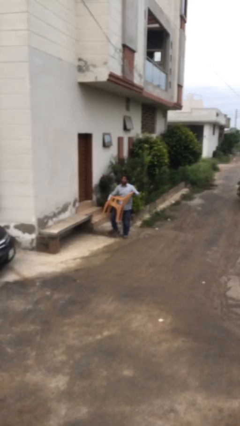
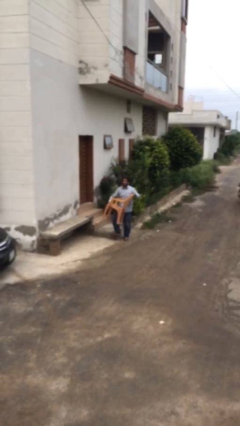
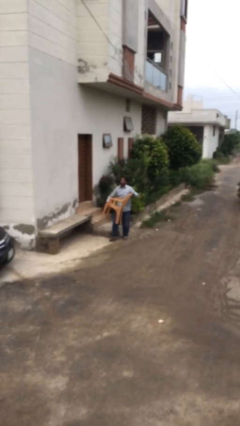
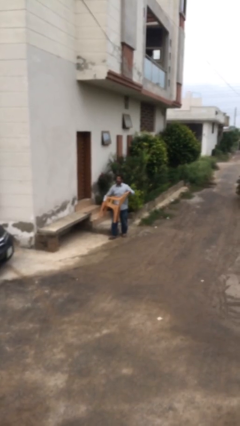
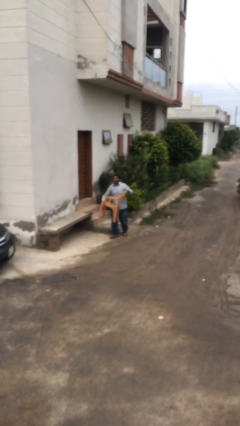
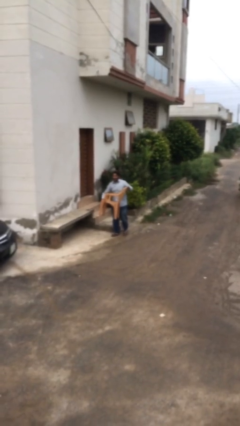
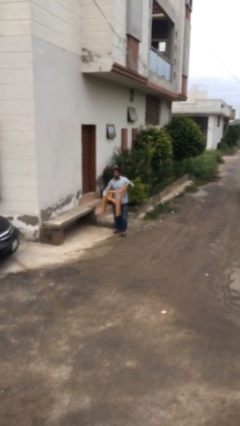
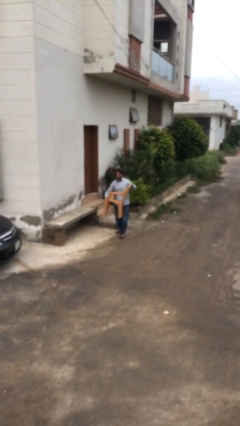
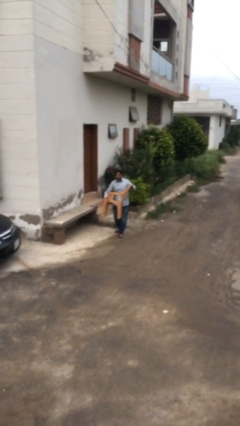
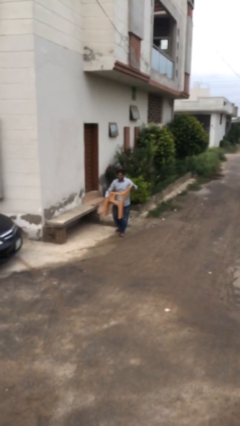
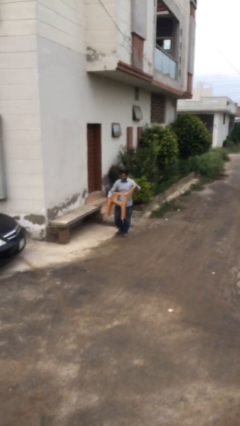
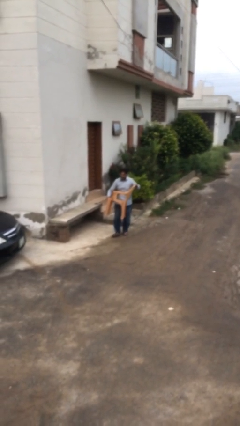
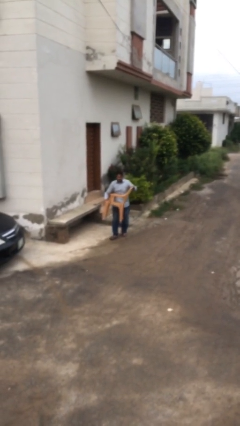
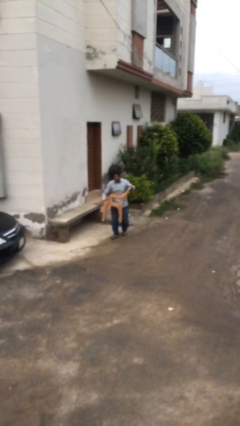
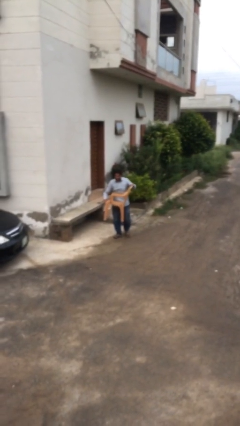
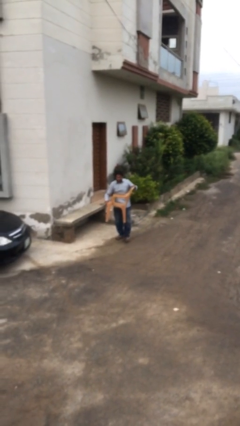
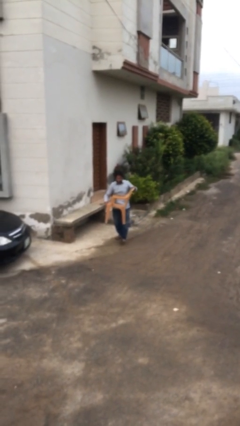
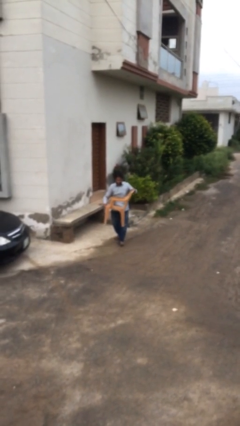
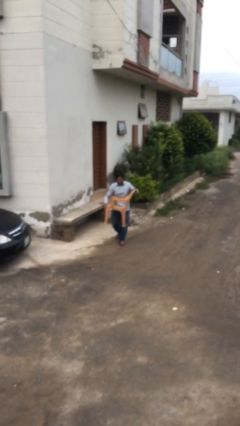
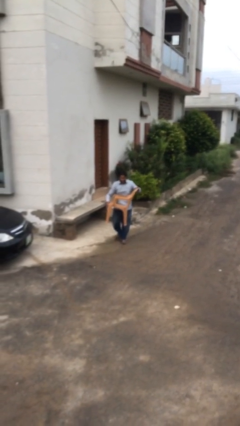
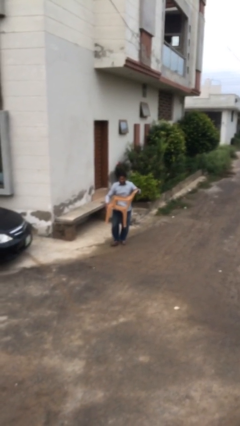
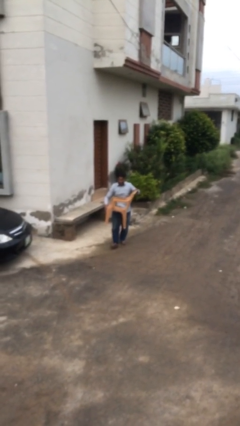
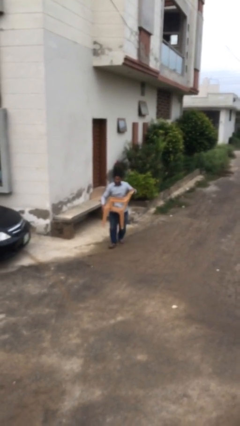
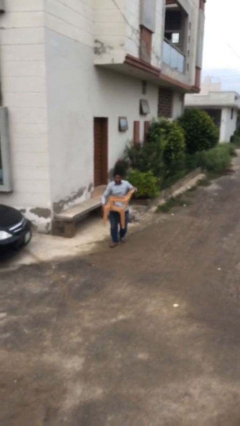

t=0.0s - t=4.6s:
person carries heavy object

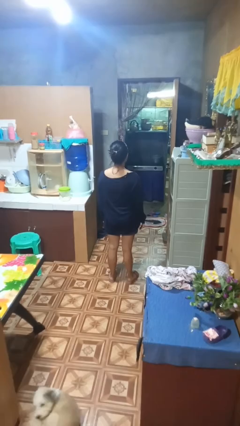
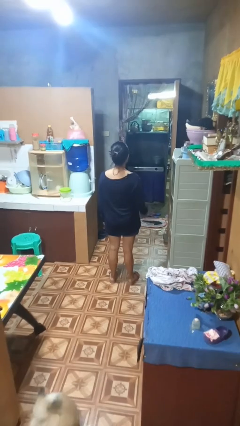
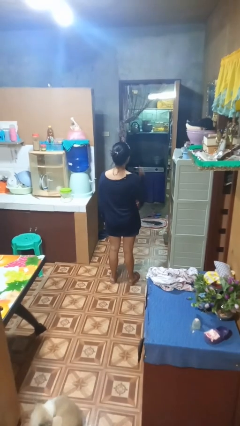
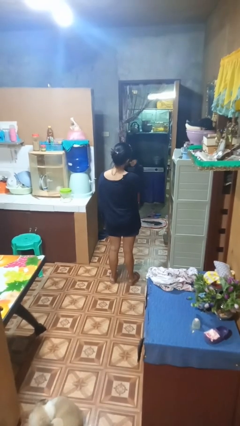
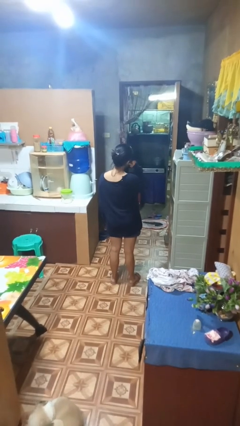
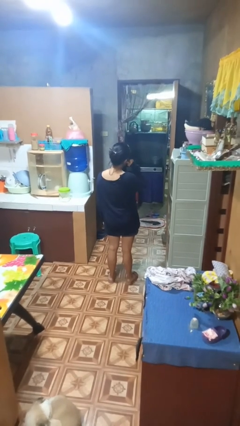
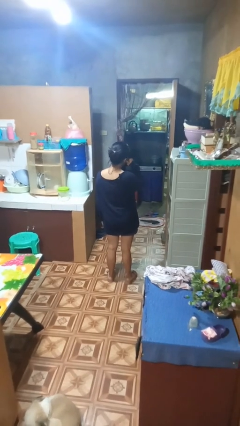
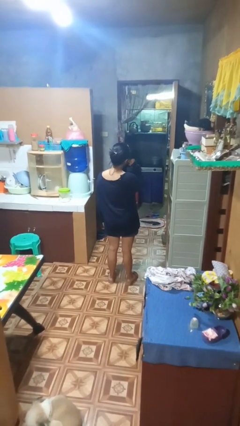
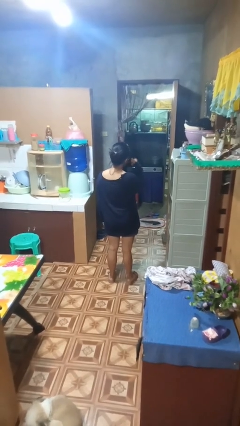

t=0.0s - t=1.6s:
person gestures call me

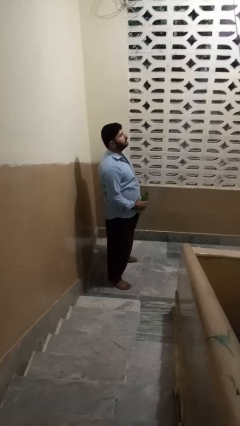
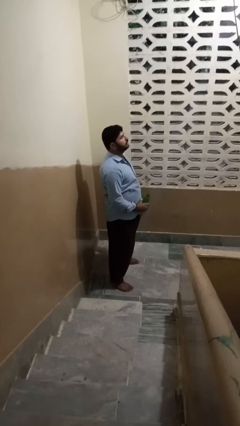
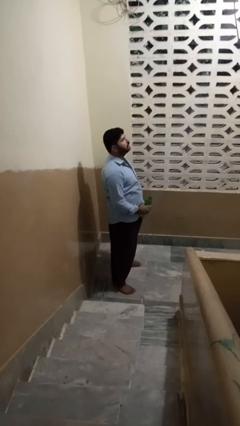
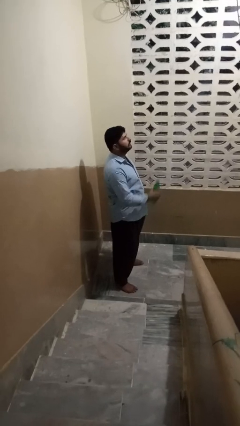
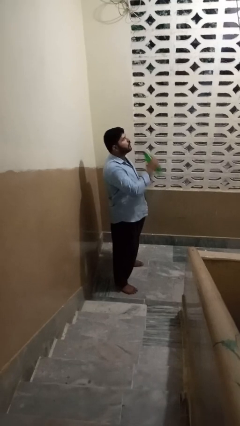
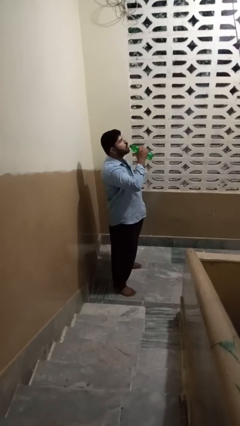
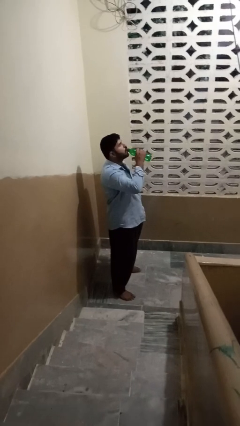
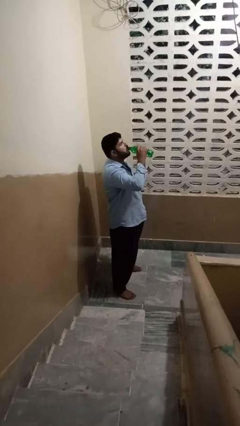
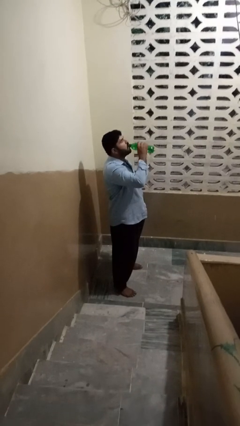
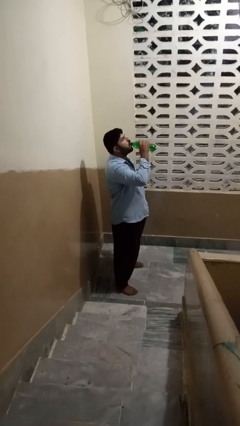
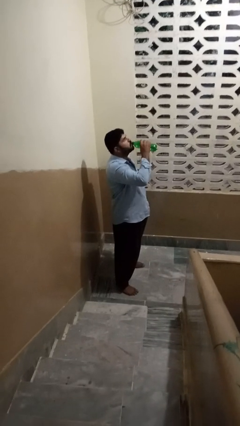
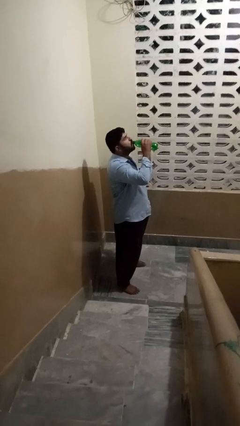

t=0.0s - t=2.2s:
person drinks from bottle

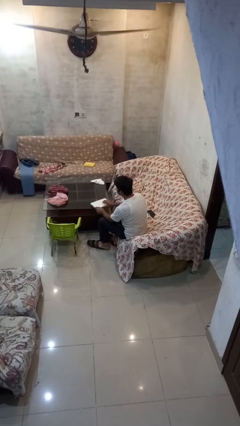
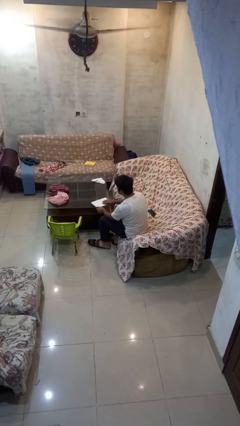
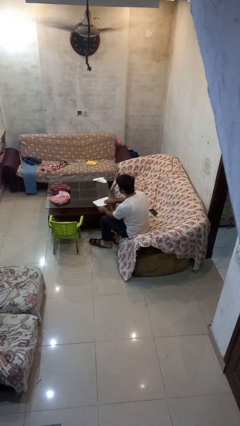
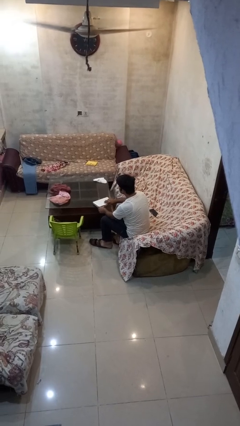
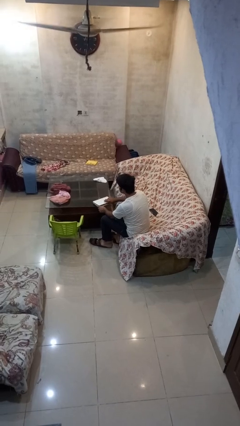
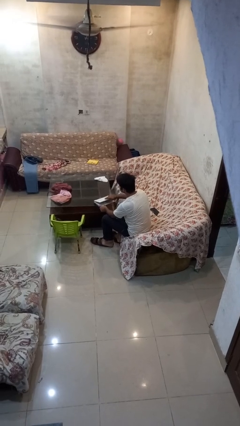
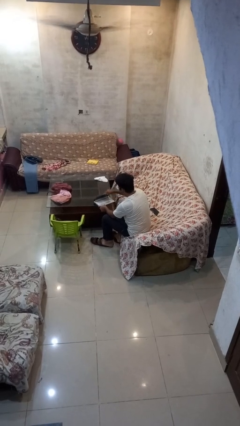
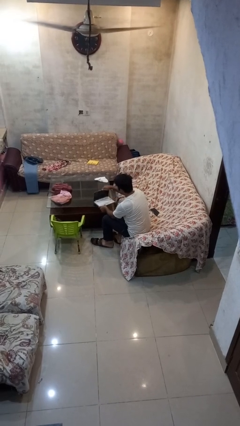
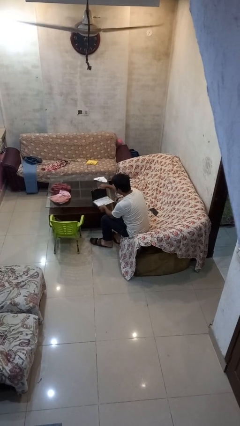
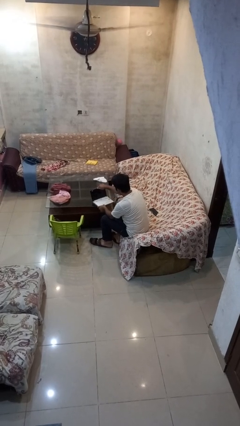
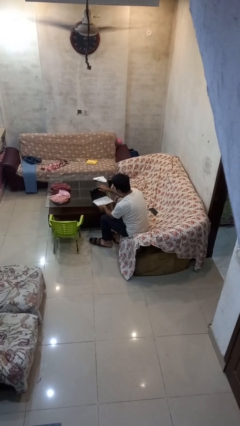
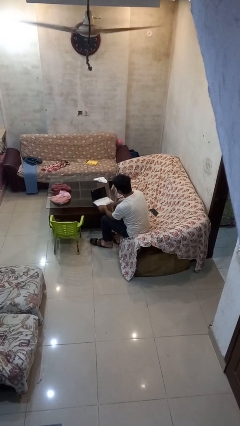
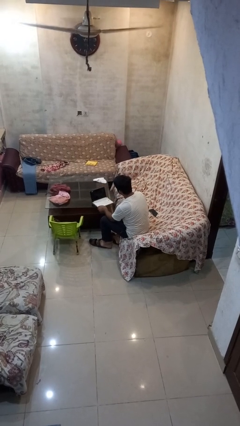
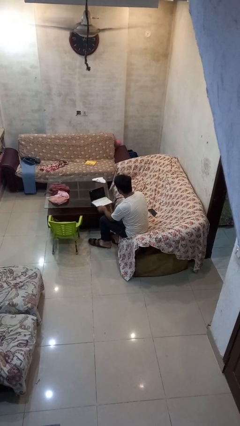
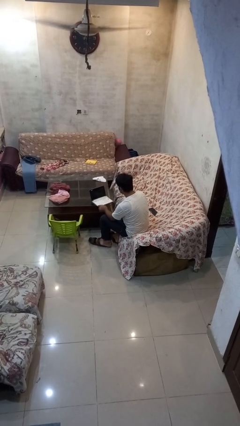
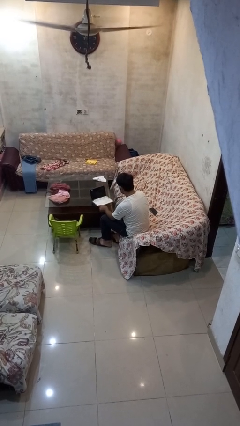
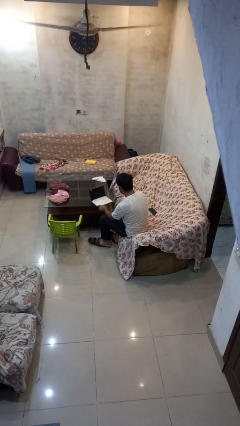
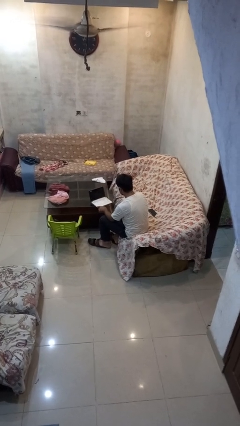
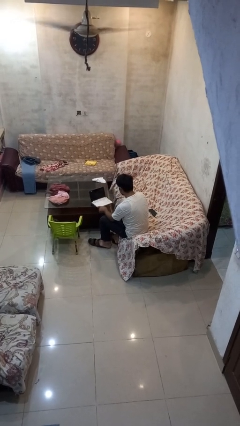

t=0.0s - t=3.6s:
person opens laptop

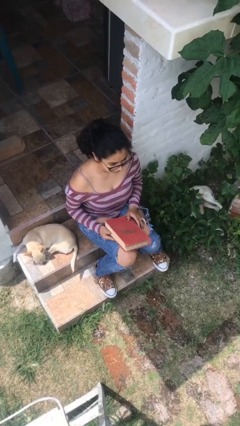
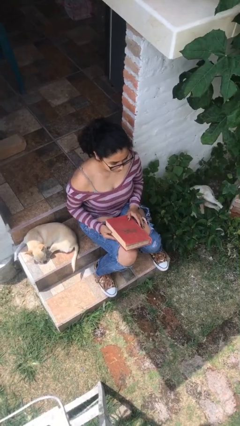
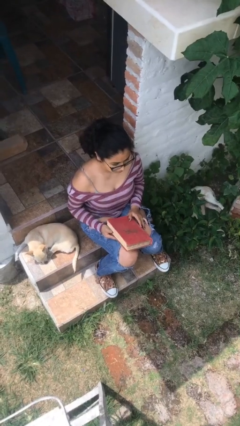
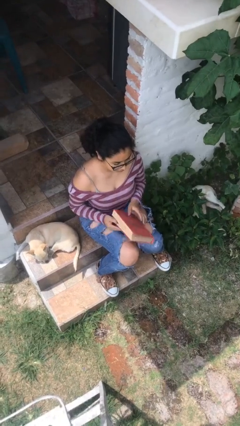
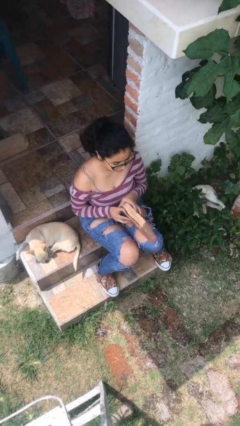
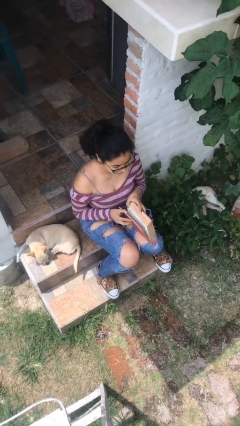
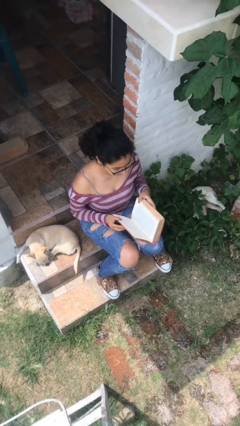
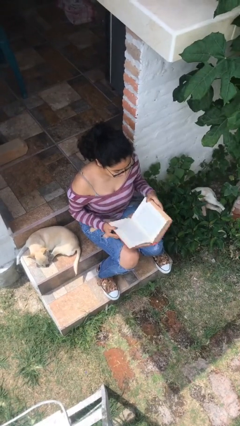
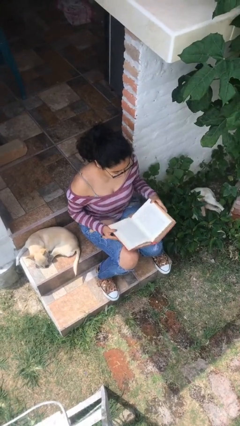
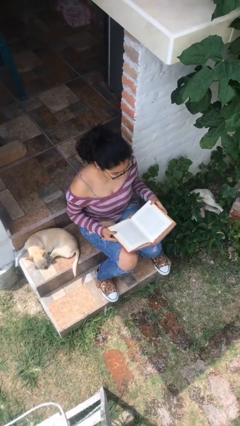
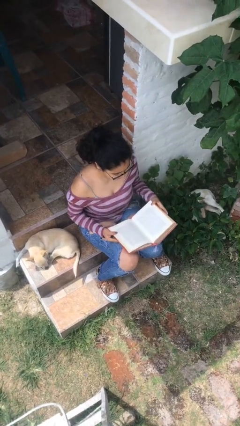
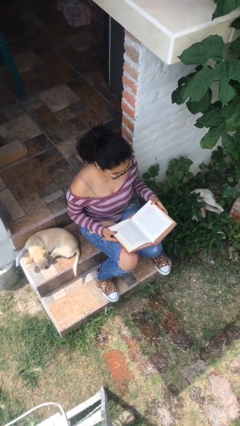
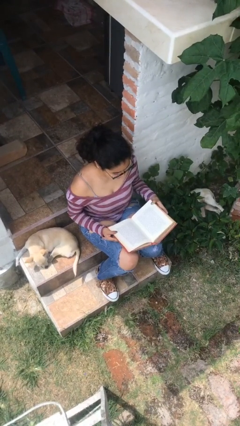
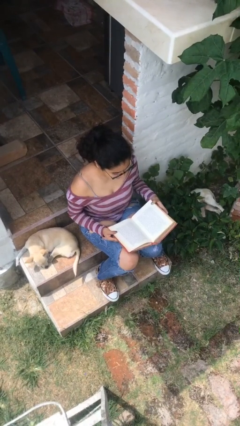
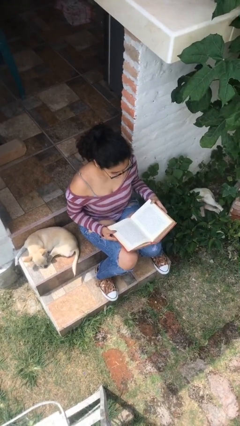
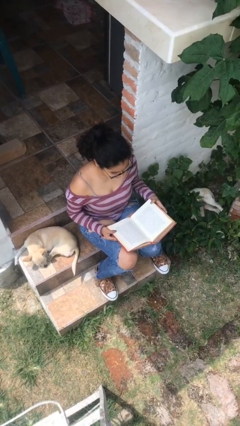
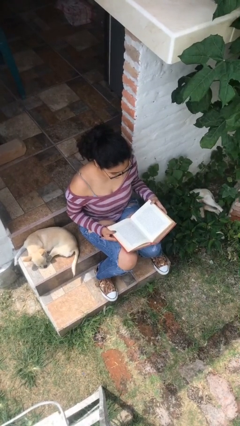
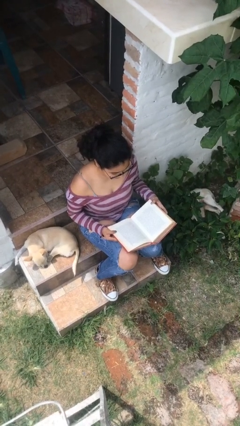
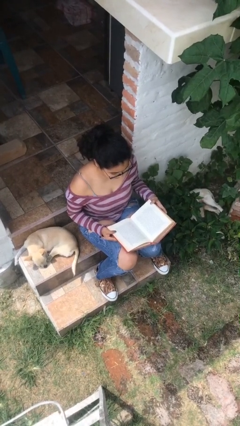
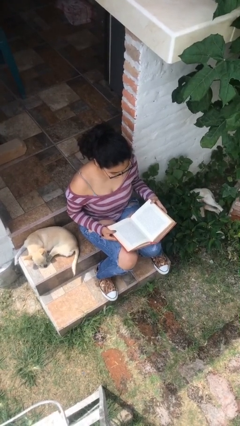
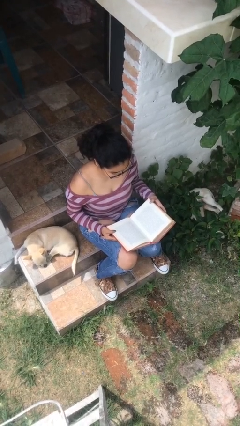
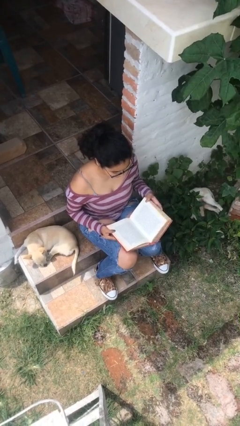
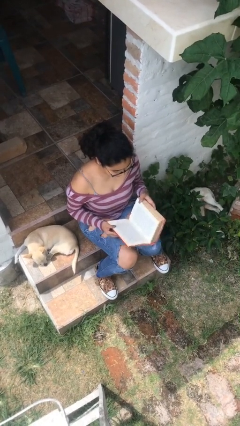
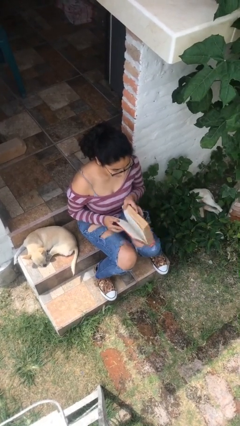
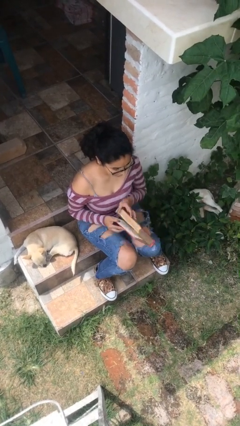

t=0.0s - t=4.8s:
person reads book

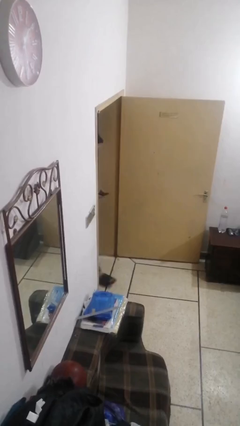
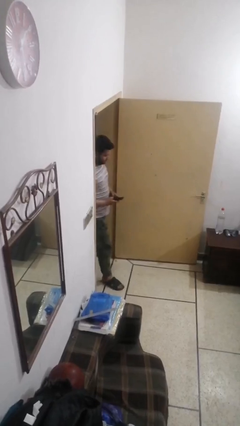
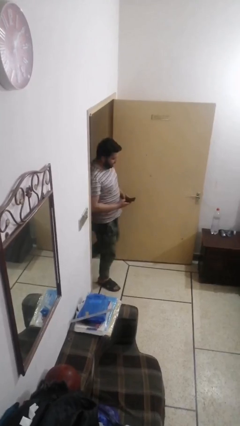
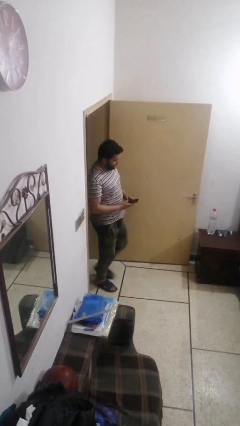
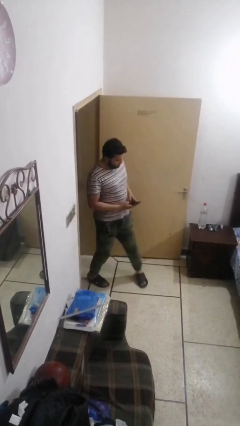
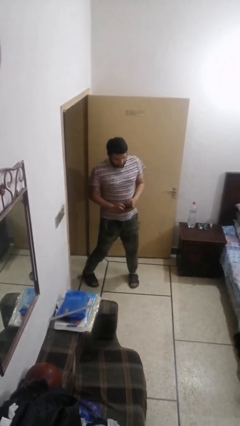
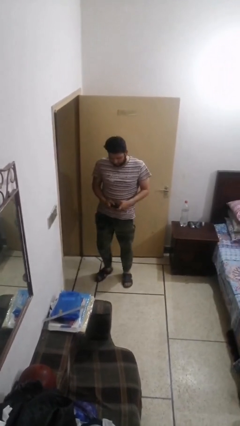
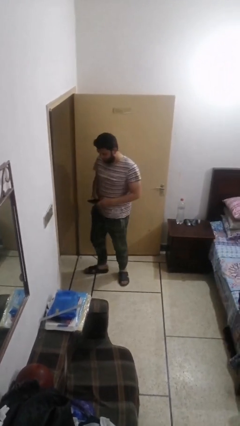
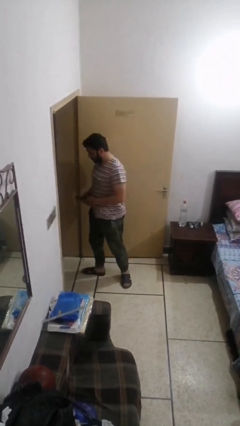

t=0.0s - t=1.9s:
person enters scene through structure
